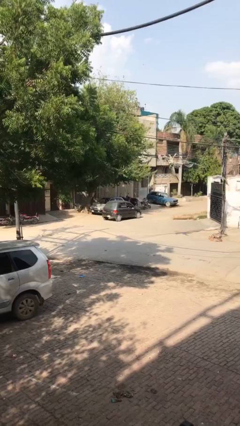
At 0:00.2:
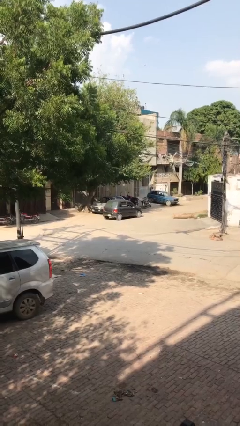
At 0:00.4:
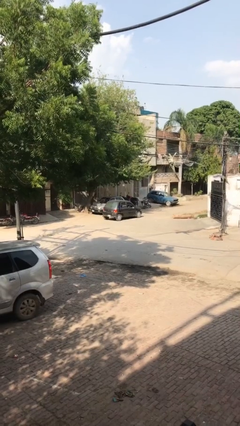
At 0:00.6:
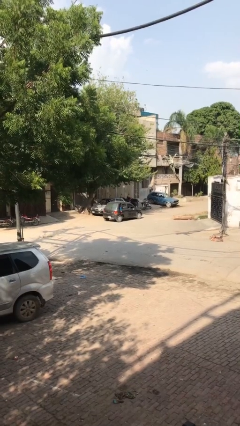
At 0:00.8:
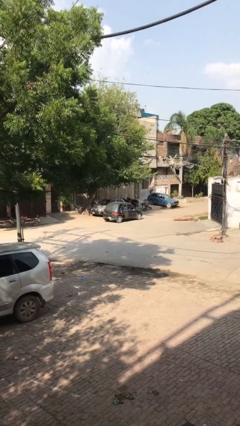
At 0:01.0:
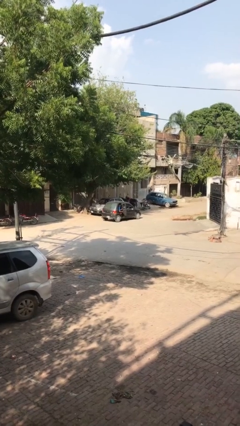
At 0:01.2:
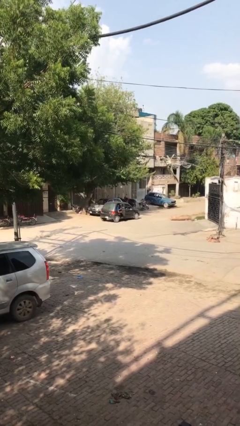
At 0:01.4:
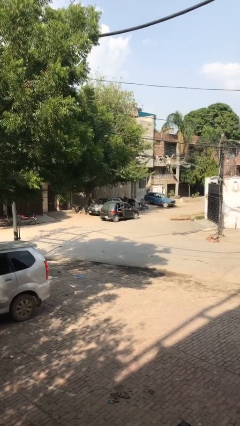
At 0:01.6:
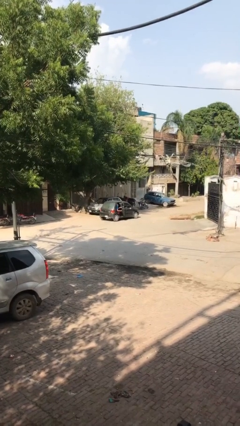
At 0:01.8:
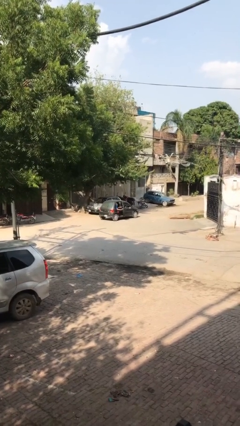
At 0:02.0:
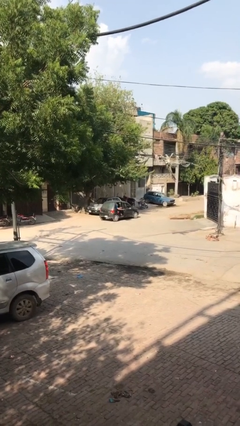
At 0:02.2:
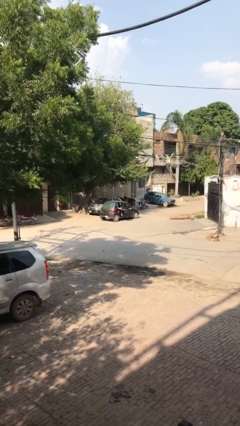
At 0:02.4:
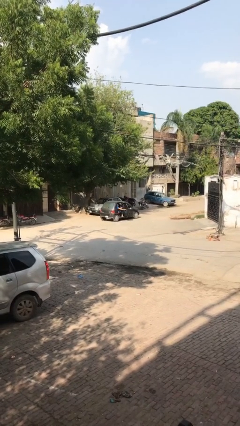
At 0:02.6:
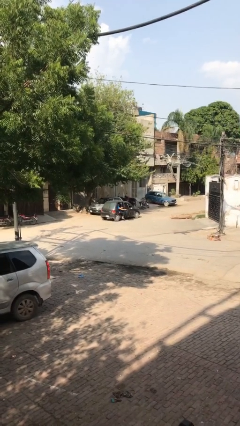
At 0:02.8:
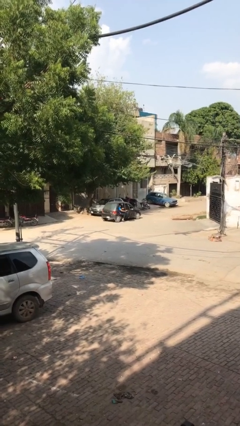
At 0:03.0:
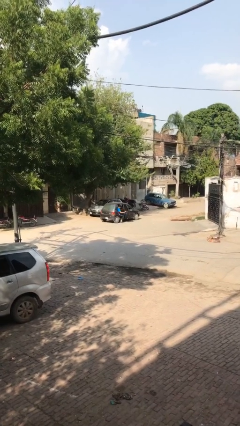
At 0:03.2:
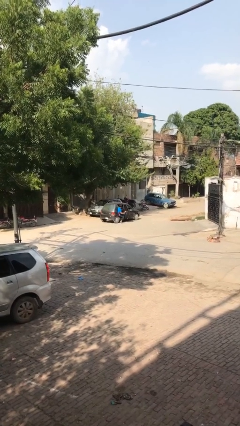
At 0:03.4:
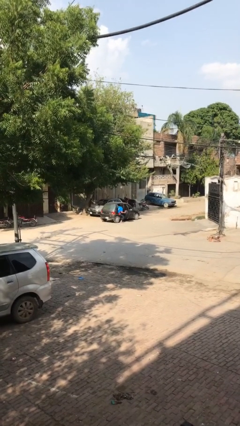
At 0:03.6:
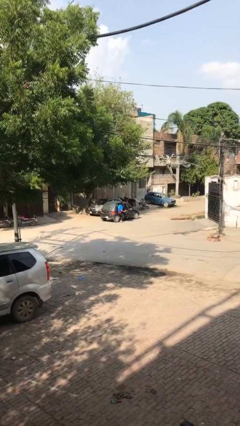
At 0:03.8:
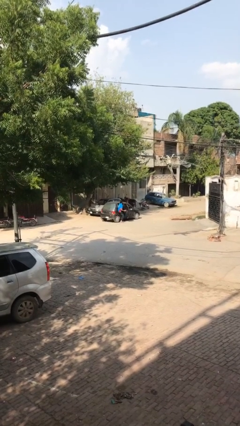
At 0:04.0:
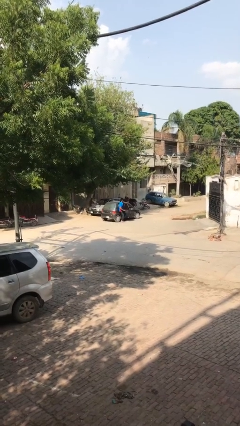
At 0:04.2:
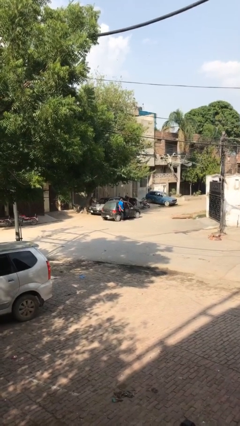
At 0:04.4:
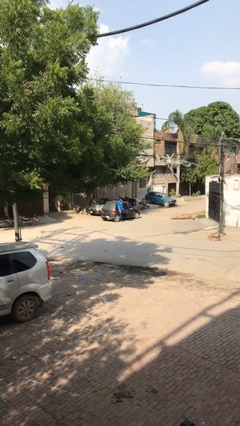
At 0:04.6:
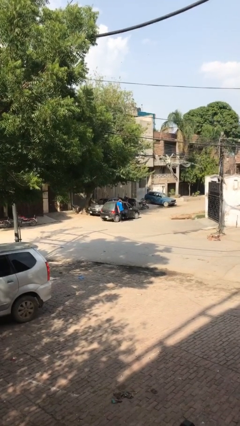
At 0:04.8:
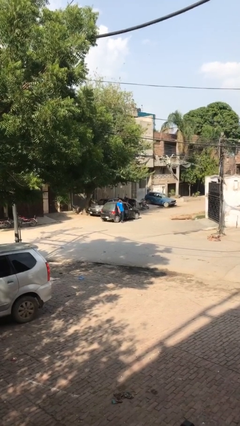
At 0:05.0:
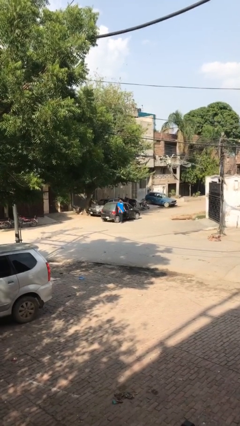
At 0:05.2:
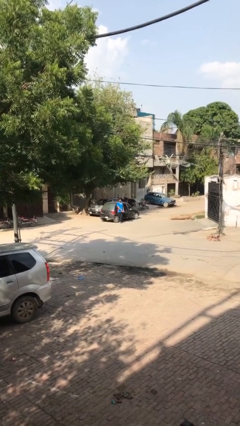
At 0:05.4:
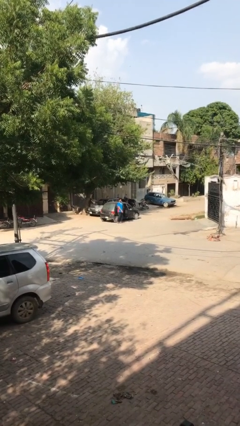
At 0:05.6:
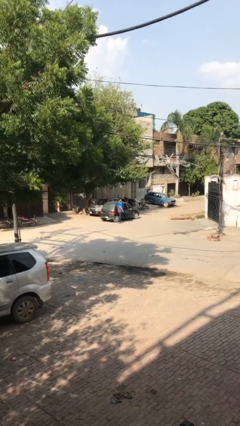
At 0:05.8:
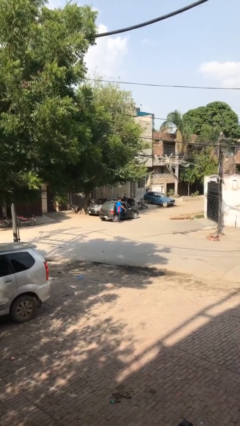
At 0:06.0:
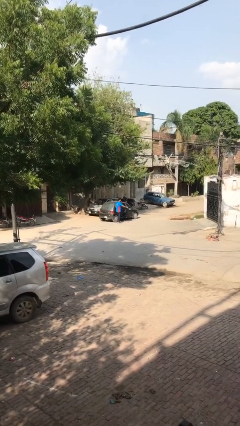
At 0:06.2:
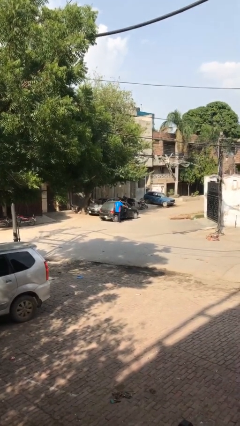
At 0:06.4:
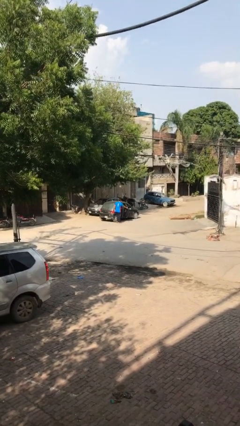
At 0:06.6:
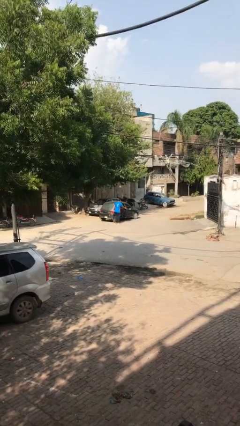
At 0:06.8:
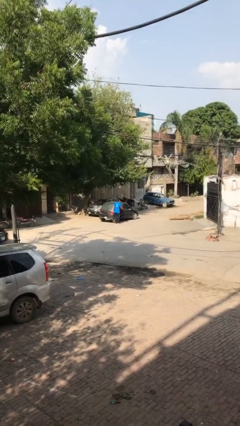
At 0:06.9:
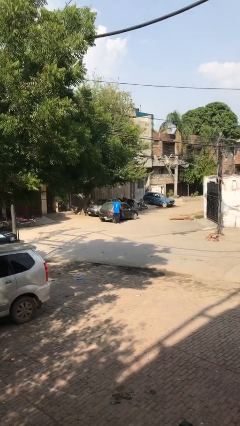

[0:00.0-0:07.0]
car drops off person

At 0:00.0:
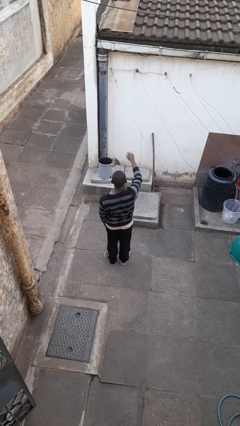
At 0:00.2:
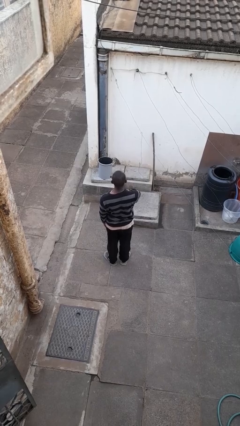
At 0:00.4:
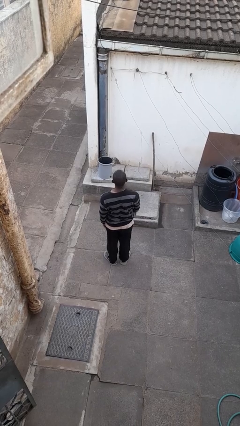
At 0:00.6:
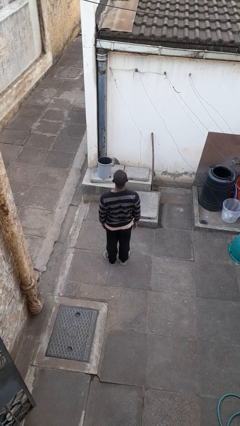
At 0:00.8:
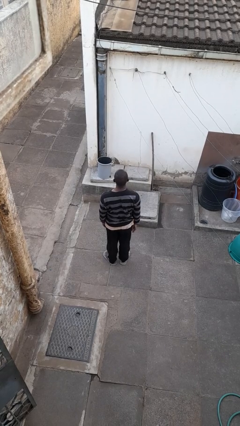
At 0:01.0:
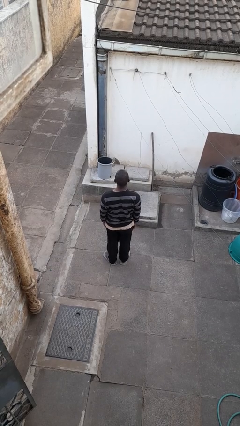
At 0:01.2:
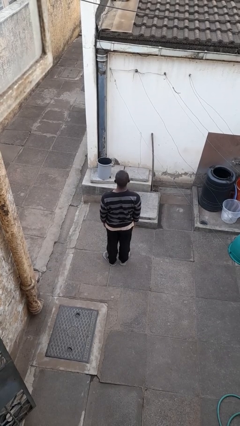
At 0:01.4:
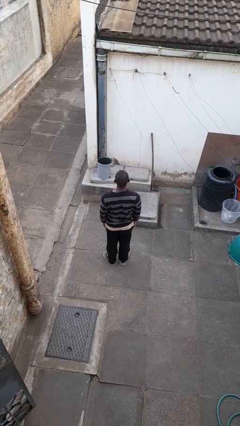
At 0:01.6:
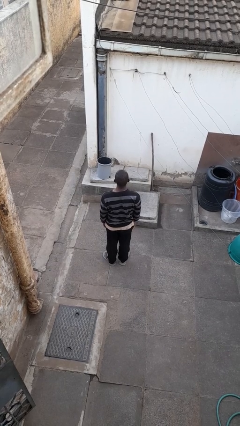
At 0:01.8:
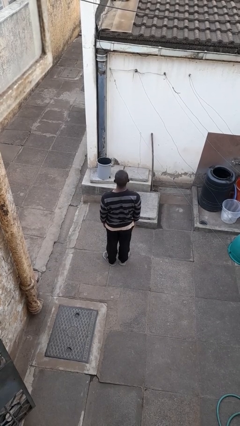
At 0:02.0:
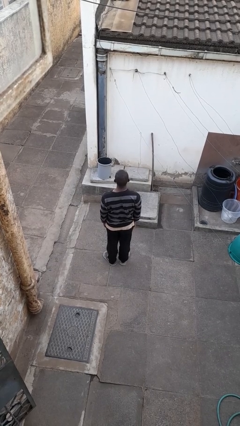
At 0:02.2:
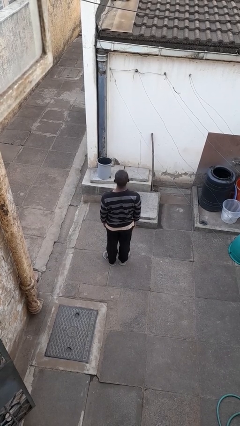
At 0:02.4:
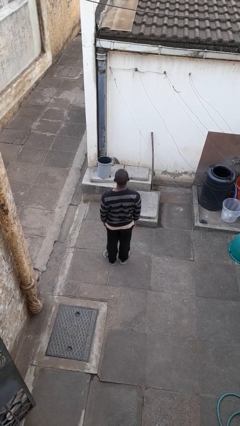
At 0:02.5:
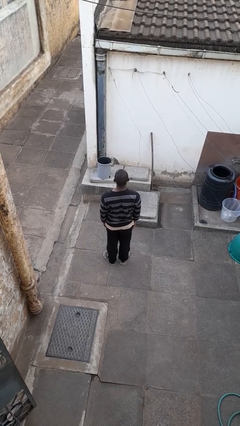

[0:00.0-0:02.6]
person gestures lower hand

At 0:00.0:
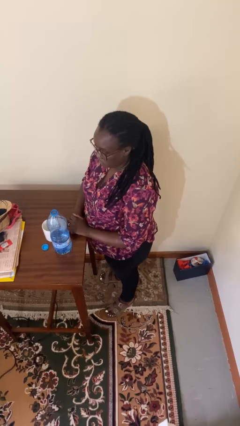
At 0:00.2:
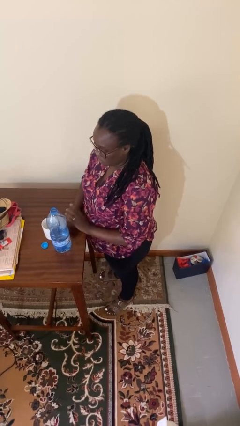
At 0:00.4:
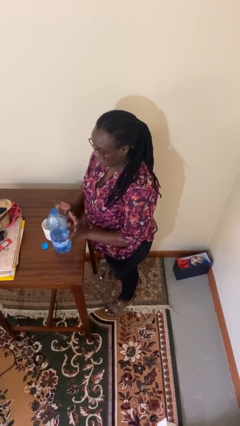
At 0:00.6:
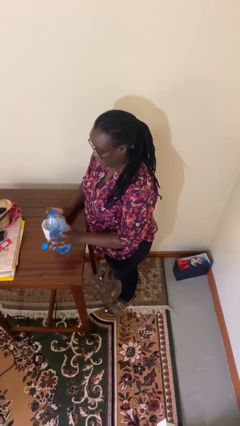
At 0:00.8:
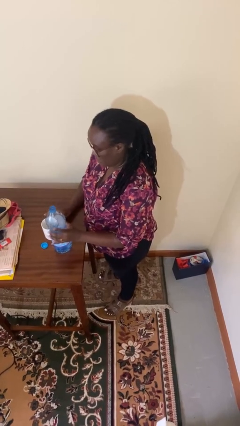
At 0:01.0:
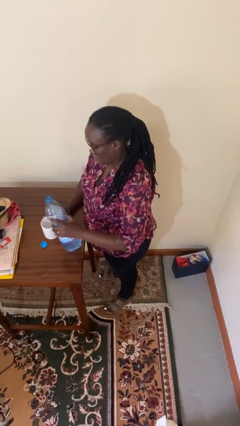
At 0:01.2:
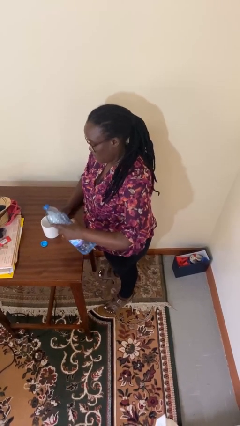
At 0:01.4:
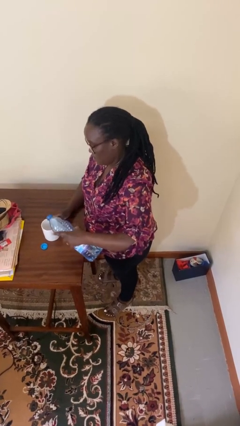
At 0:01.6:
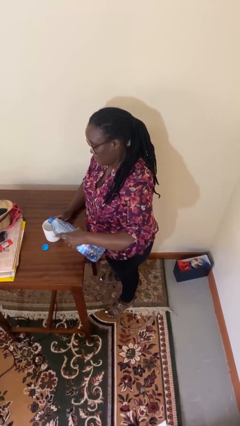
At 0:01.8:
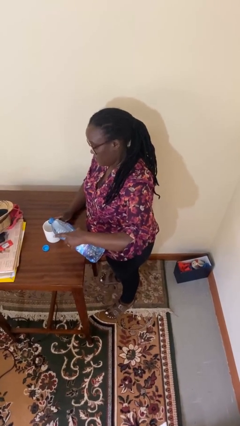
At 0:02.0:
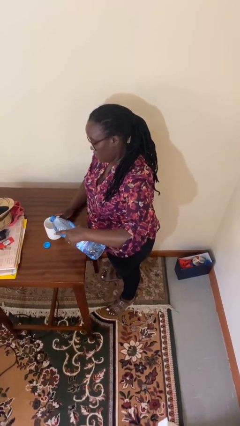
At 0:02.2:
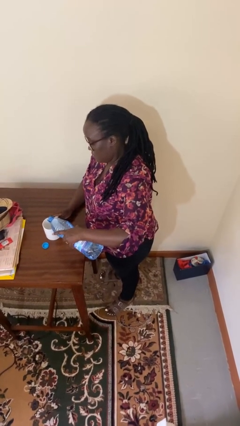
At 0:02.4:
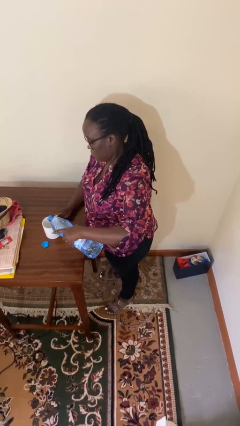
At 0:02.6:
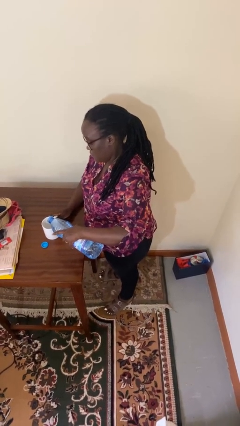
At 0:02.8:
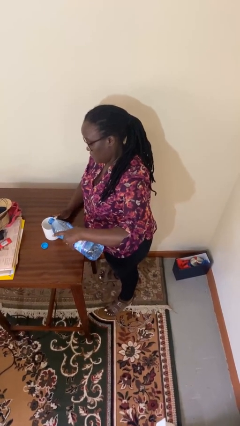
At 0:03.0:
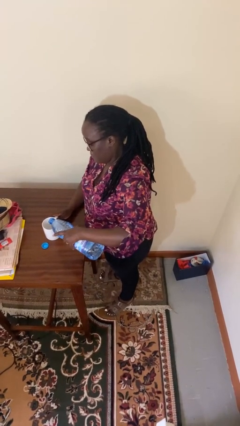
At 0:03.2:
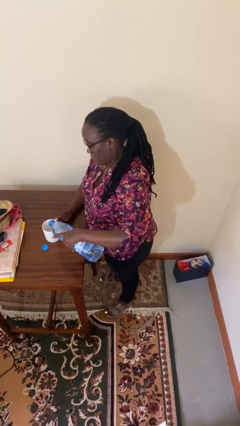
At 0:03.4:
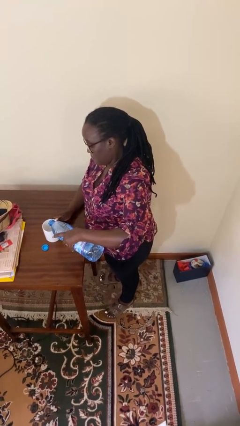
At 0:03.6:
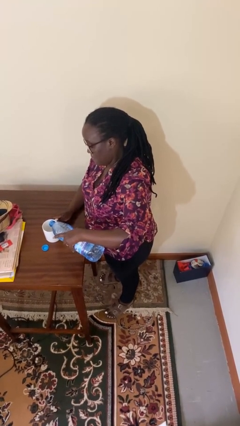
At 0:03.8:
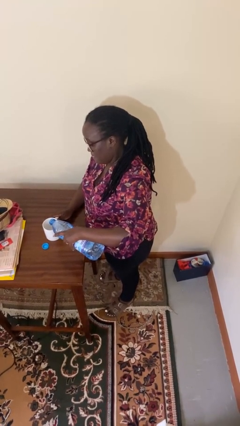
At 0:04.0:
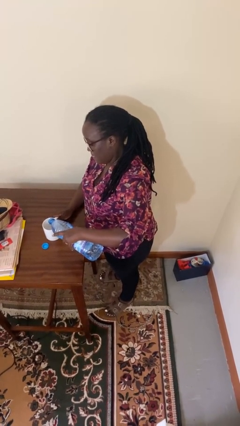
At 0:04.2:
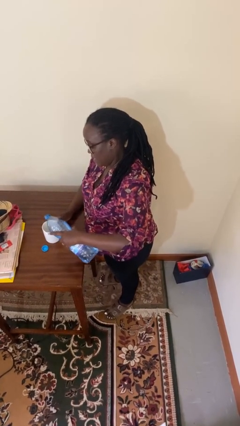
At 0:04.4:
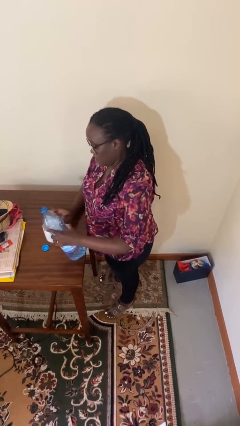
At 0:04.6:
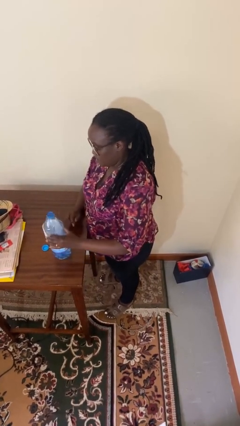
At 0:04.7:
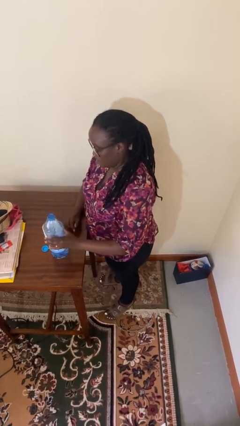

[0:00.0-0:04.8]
person pours liquid into cup

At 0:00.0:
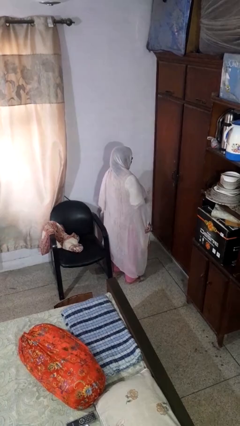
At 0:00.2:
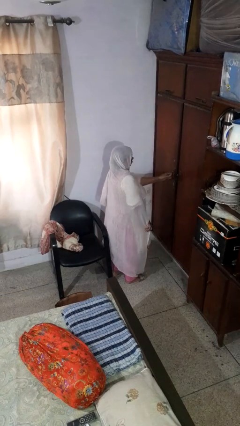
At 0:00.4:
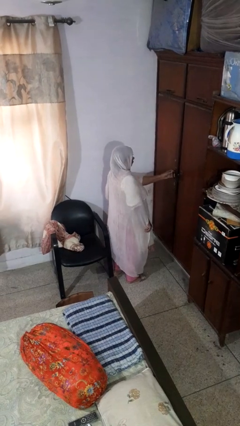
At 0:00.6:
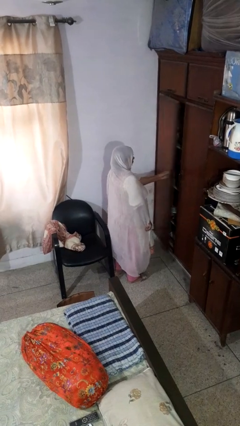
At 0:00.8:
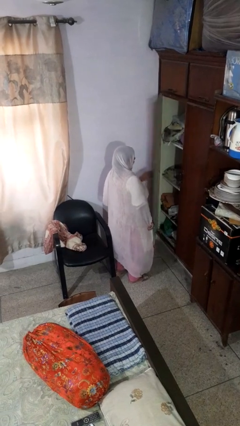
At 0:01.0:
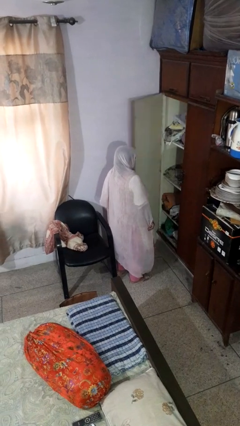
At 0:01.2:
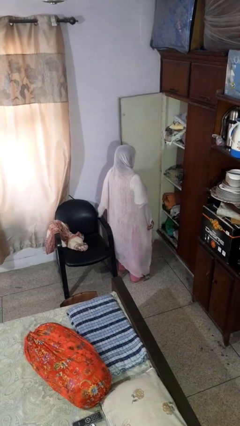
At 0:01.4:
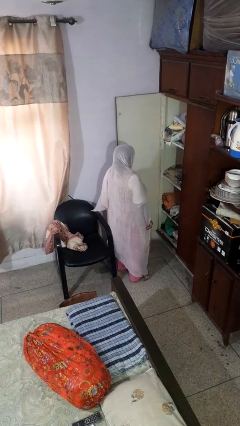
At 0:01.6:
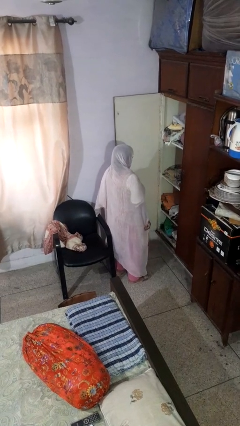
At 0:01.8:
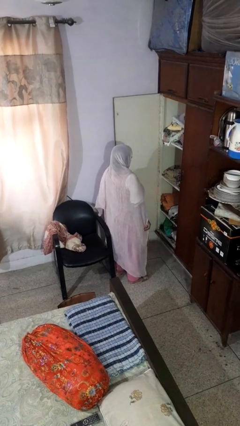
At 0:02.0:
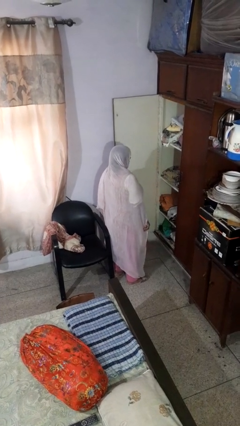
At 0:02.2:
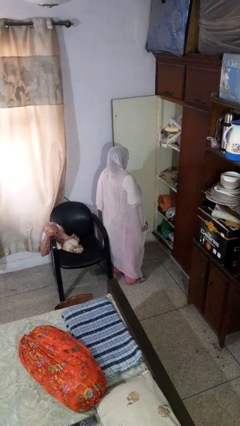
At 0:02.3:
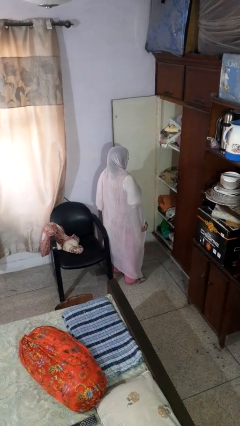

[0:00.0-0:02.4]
person opens closet door

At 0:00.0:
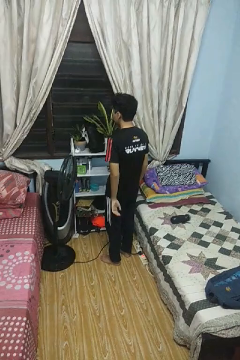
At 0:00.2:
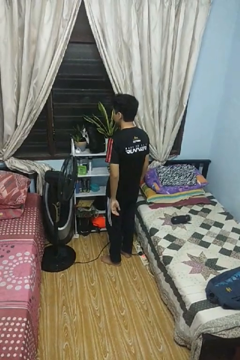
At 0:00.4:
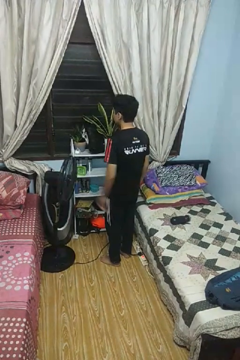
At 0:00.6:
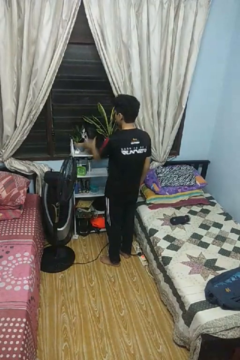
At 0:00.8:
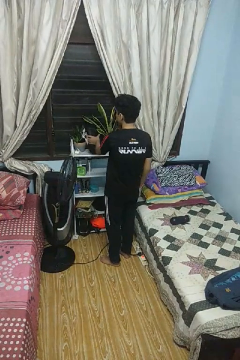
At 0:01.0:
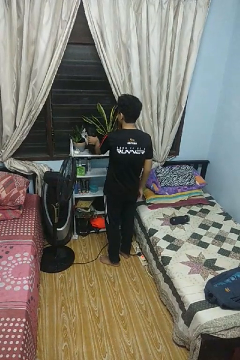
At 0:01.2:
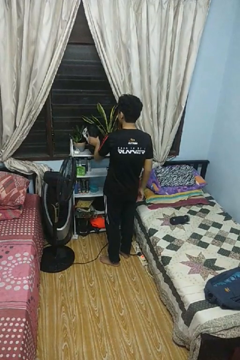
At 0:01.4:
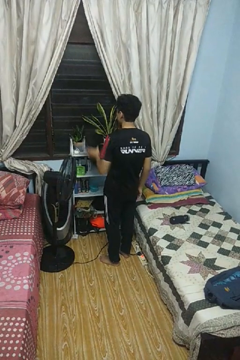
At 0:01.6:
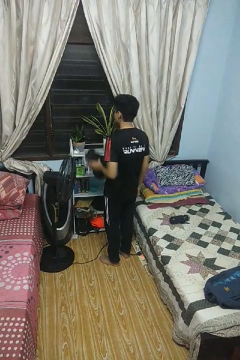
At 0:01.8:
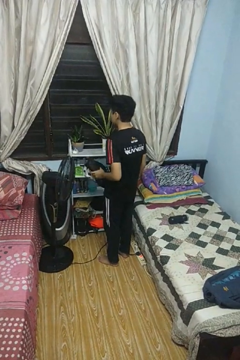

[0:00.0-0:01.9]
person picks up object from countertop
